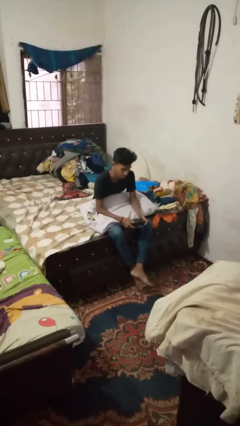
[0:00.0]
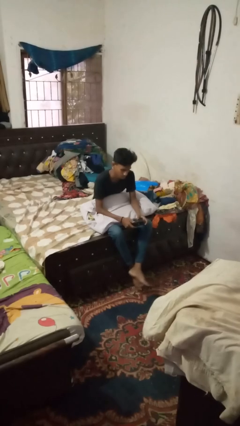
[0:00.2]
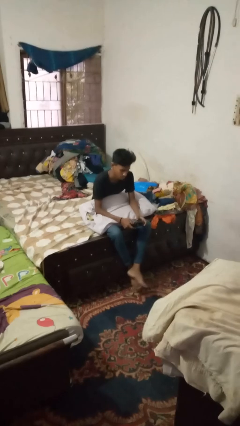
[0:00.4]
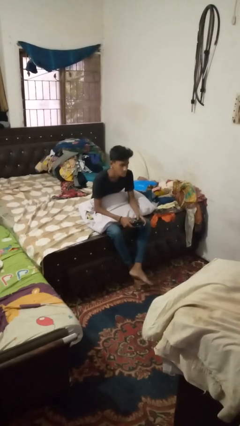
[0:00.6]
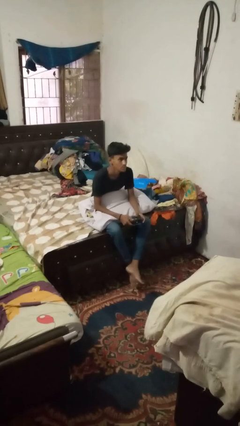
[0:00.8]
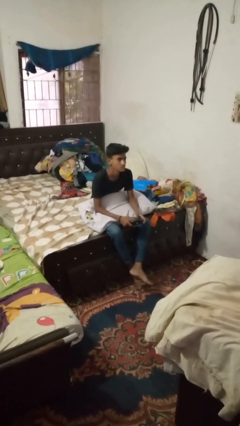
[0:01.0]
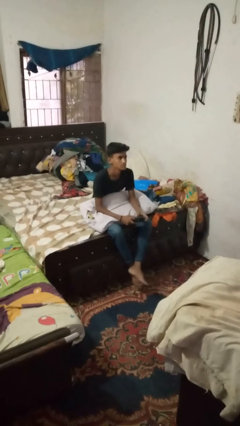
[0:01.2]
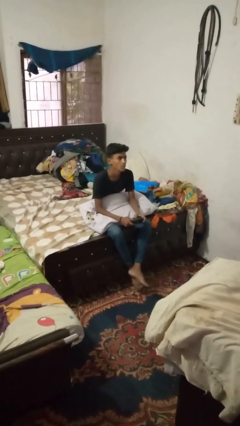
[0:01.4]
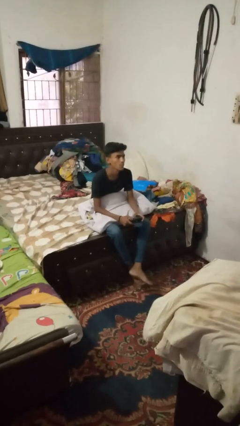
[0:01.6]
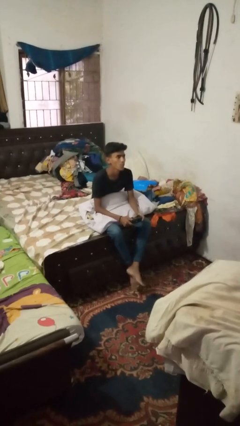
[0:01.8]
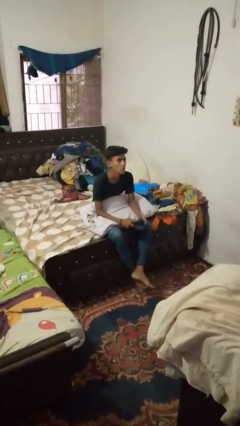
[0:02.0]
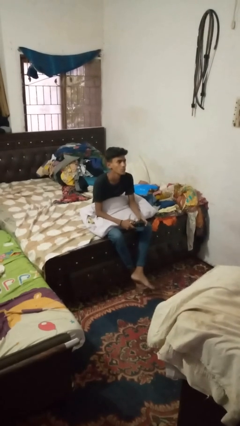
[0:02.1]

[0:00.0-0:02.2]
person interacts with handheld game

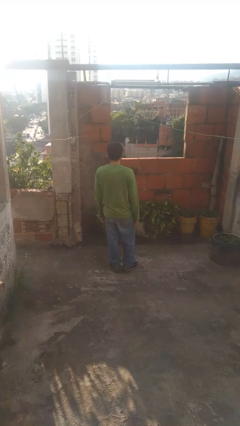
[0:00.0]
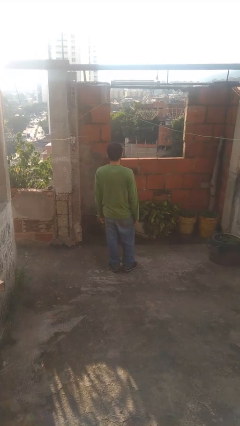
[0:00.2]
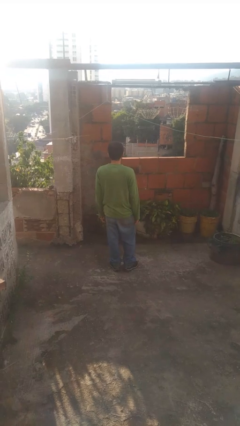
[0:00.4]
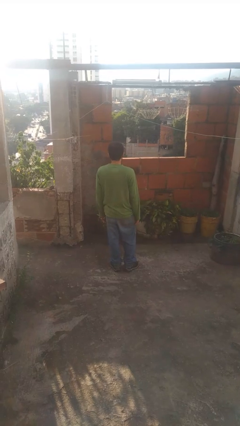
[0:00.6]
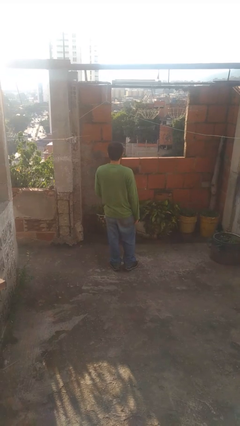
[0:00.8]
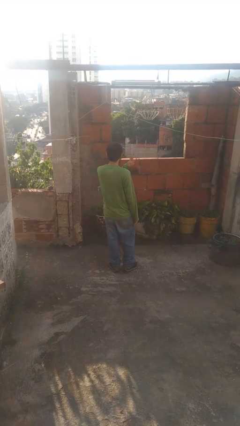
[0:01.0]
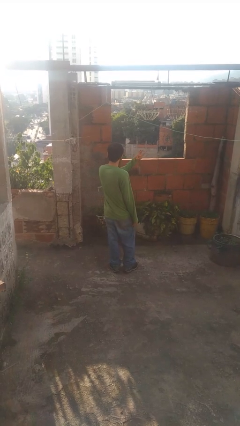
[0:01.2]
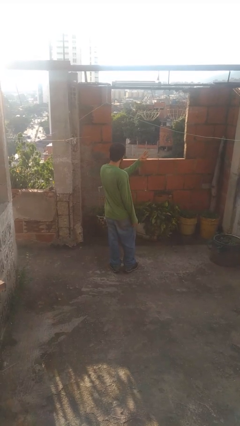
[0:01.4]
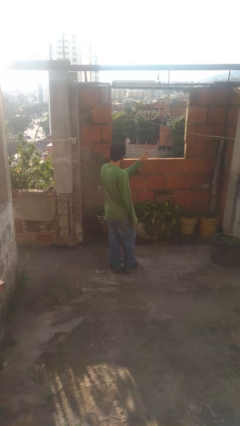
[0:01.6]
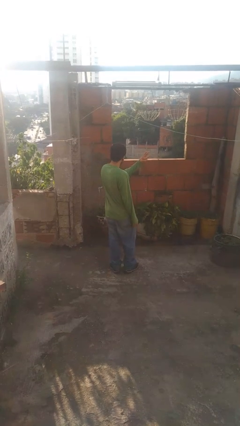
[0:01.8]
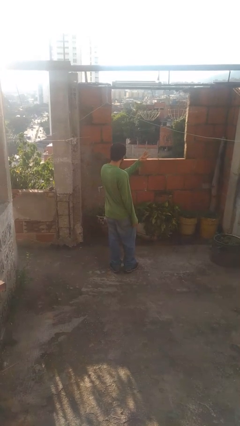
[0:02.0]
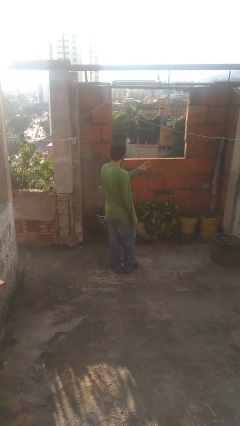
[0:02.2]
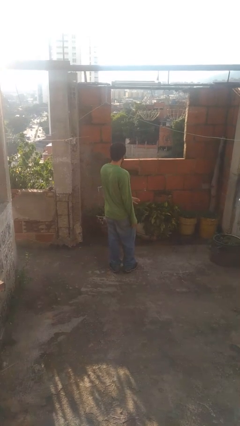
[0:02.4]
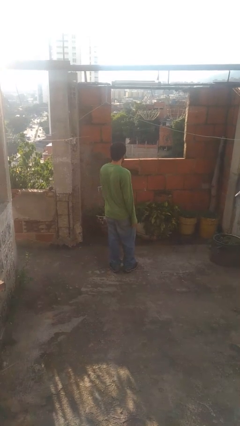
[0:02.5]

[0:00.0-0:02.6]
person gestures number three

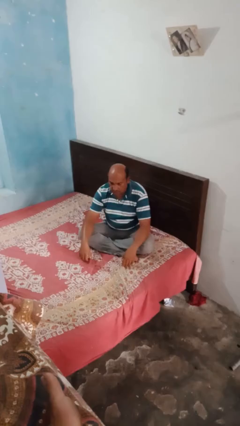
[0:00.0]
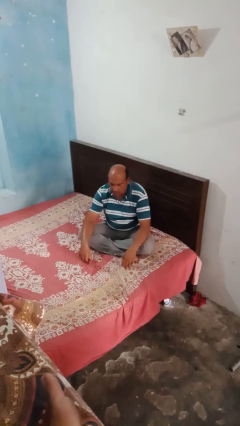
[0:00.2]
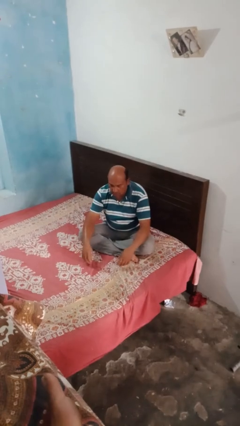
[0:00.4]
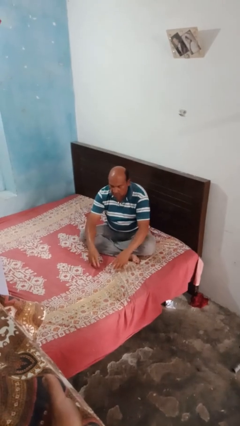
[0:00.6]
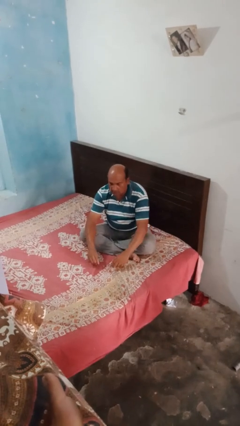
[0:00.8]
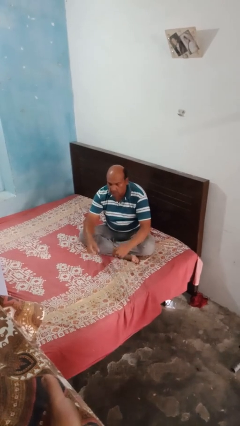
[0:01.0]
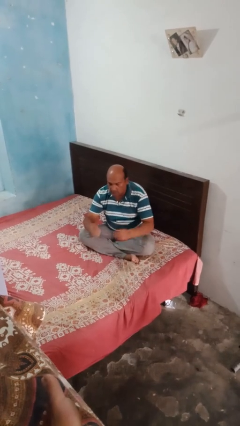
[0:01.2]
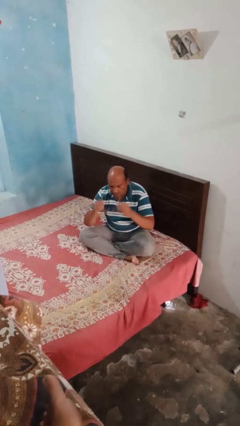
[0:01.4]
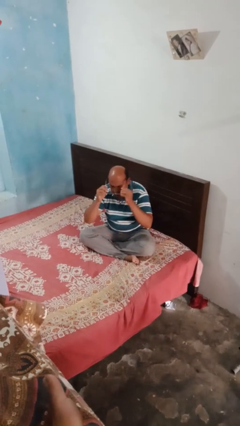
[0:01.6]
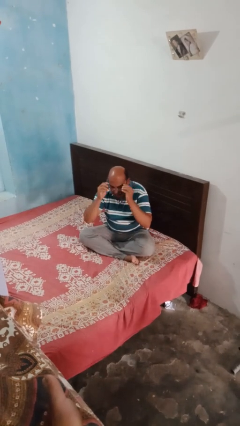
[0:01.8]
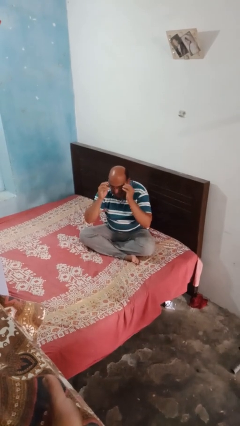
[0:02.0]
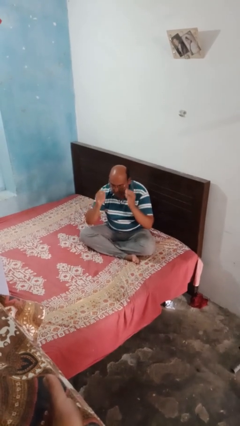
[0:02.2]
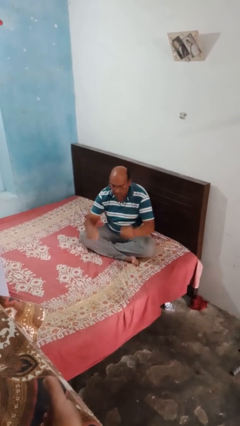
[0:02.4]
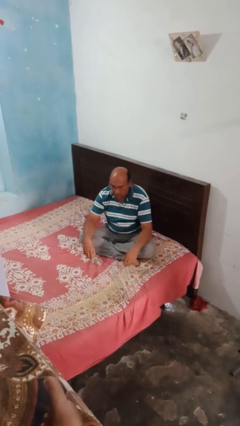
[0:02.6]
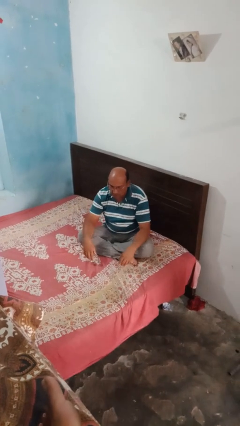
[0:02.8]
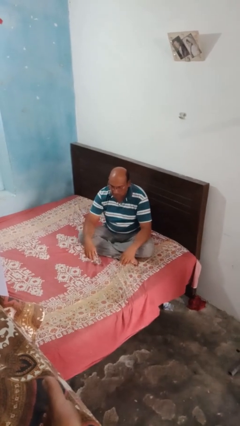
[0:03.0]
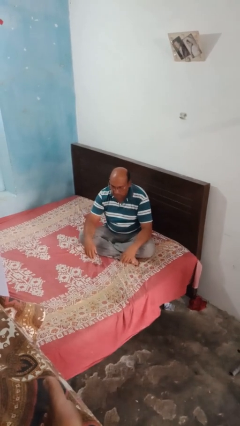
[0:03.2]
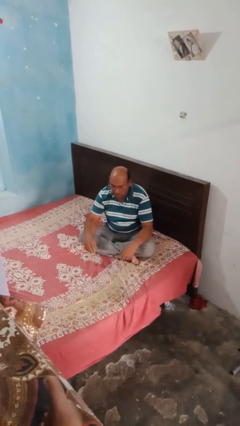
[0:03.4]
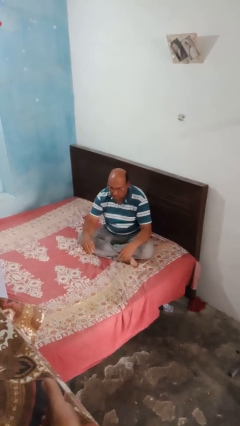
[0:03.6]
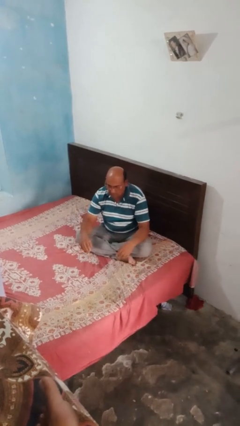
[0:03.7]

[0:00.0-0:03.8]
person puts on glasses

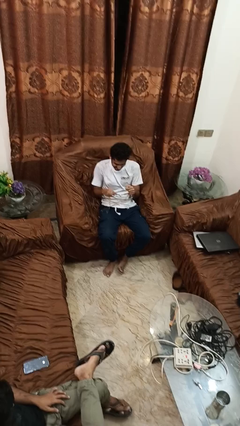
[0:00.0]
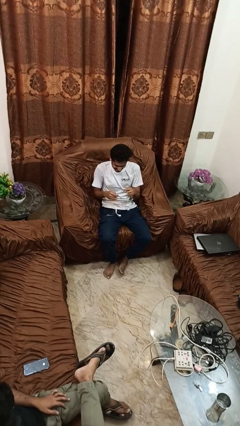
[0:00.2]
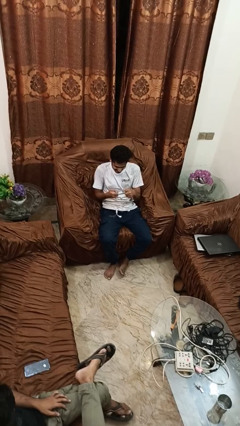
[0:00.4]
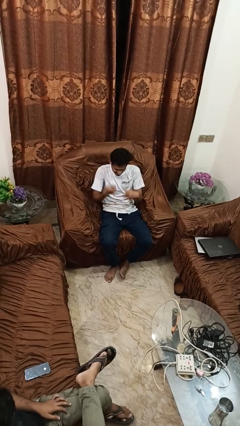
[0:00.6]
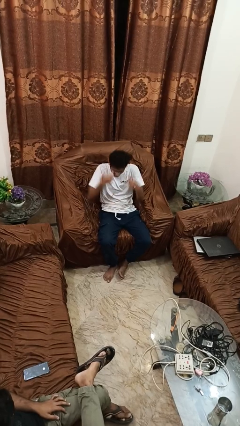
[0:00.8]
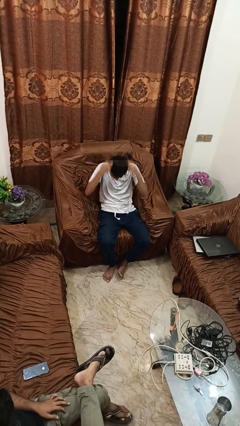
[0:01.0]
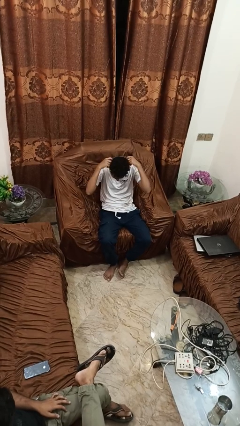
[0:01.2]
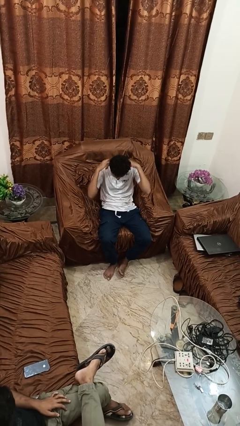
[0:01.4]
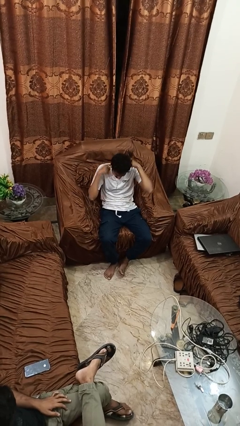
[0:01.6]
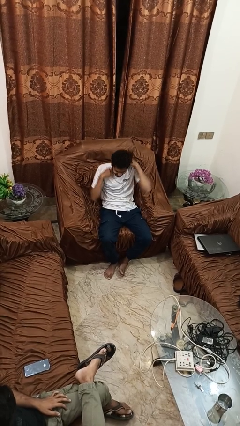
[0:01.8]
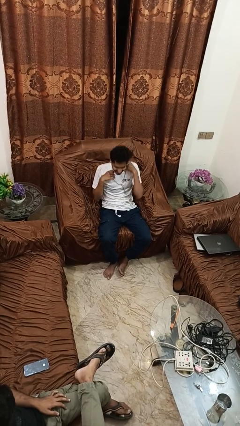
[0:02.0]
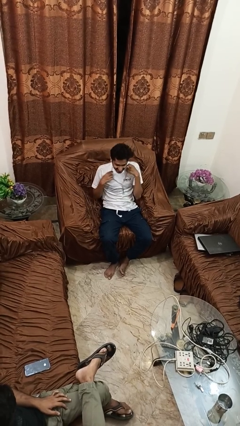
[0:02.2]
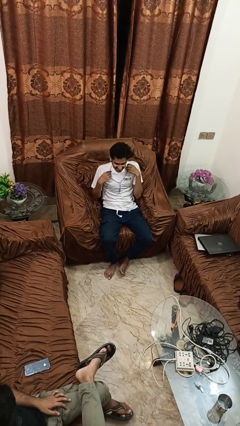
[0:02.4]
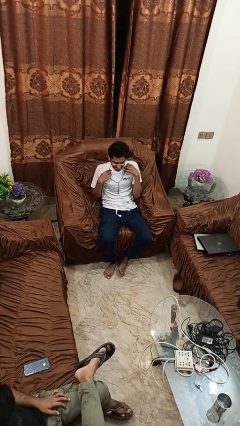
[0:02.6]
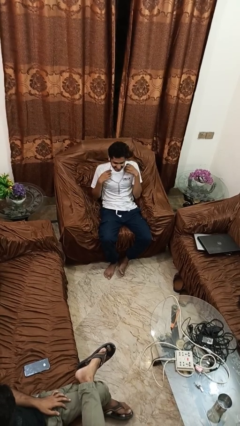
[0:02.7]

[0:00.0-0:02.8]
person puts on necklace

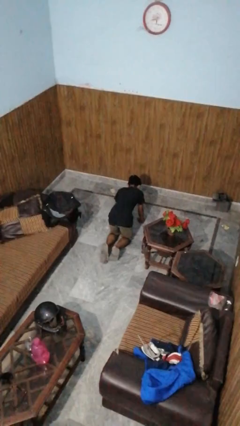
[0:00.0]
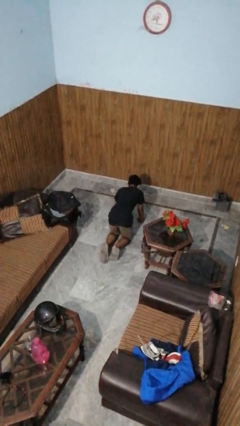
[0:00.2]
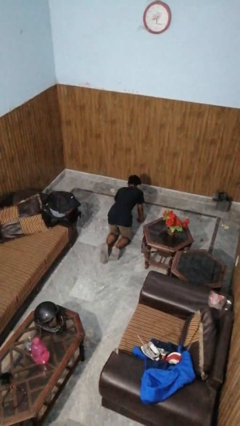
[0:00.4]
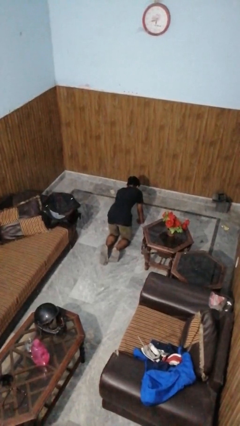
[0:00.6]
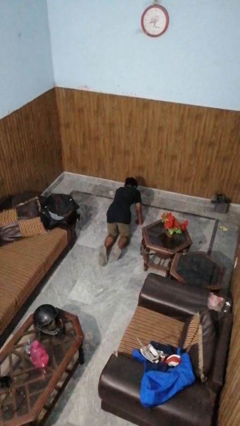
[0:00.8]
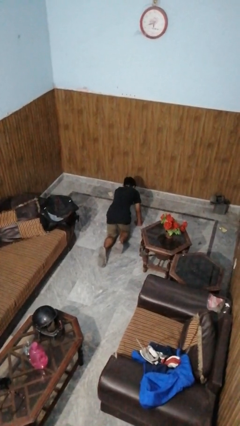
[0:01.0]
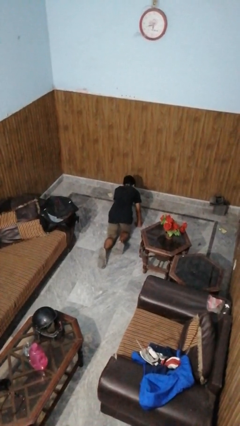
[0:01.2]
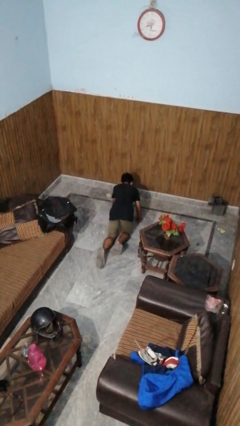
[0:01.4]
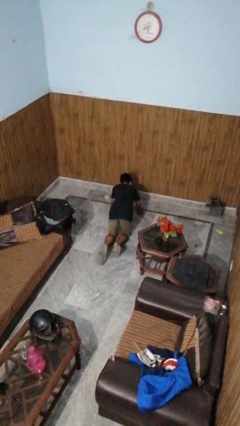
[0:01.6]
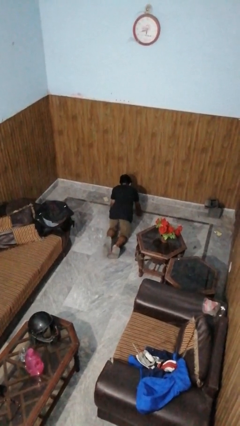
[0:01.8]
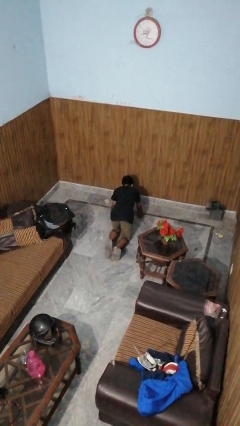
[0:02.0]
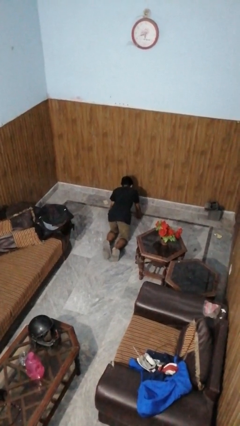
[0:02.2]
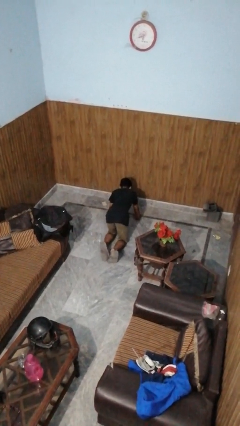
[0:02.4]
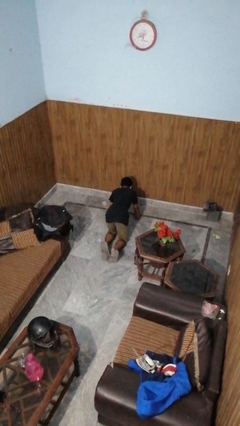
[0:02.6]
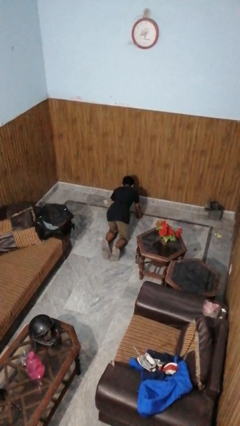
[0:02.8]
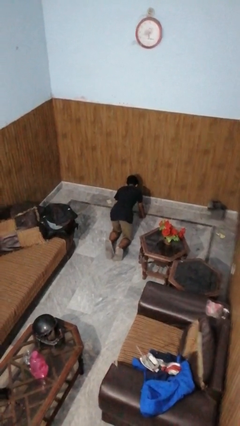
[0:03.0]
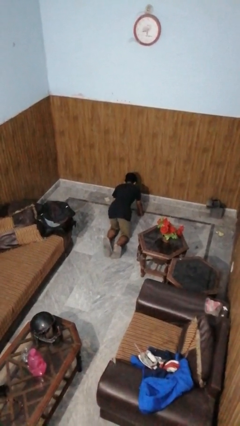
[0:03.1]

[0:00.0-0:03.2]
person crawls

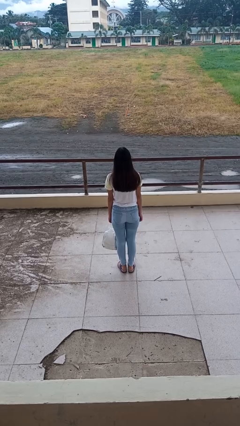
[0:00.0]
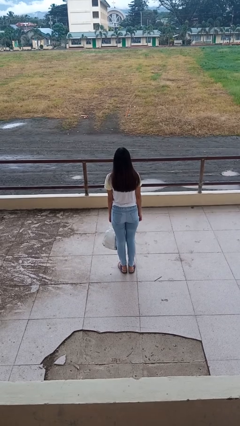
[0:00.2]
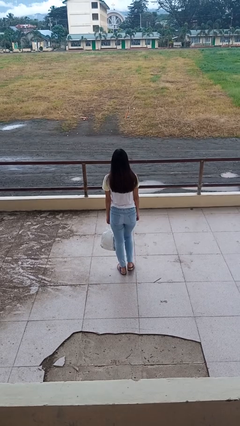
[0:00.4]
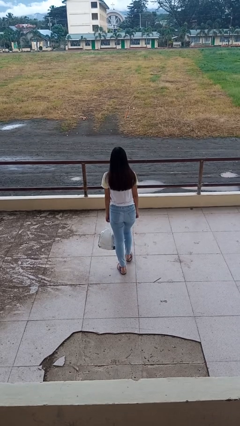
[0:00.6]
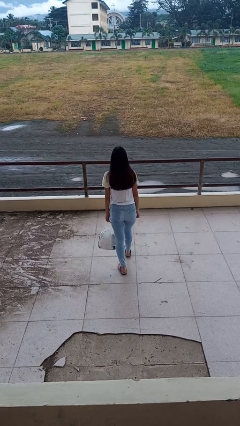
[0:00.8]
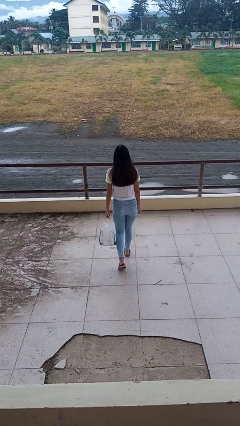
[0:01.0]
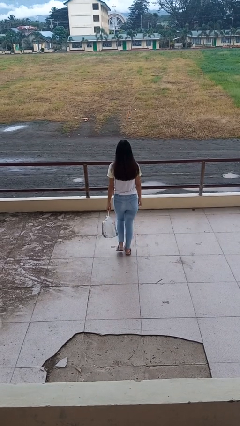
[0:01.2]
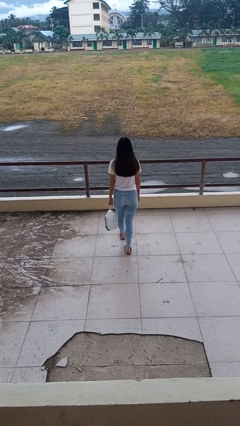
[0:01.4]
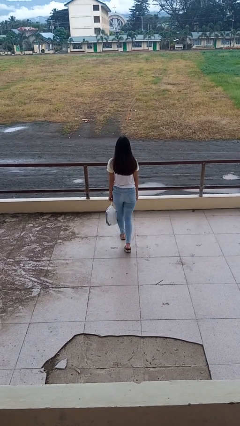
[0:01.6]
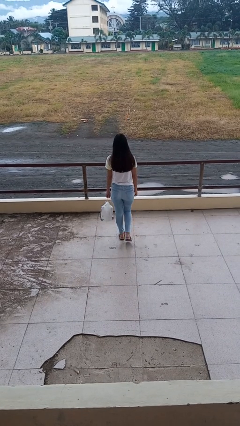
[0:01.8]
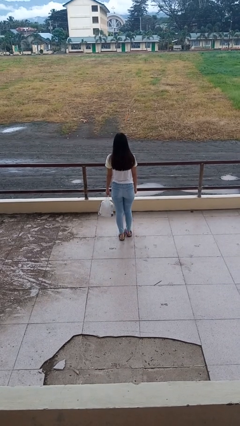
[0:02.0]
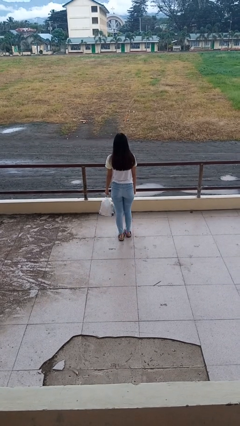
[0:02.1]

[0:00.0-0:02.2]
person carries groceries

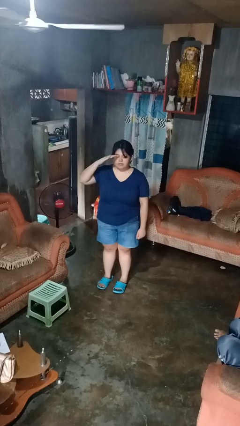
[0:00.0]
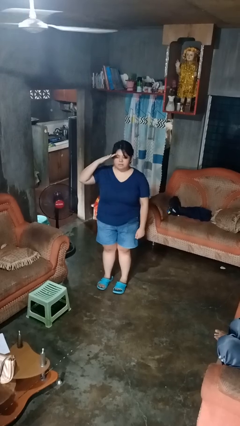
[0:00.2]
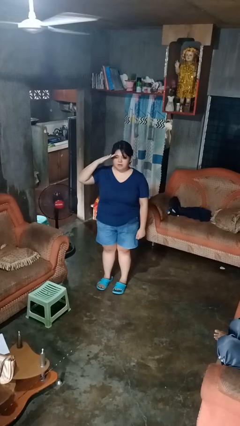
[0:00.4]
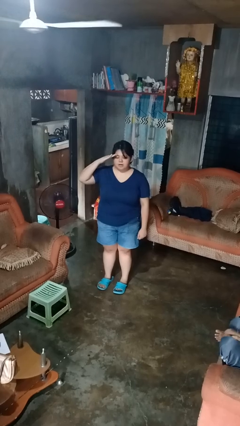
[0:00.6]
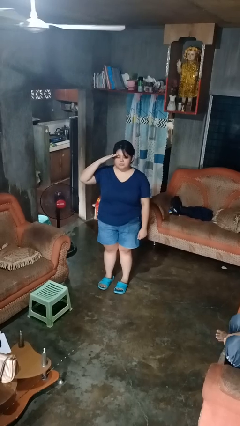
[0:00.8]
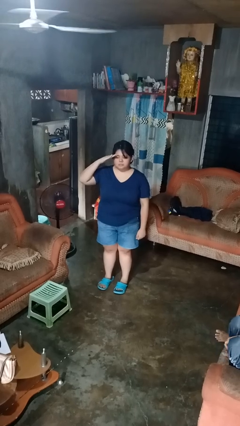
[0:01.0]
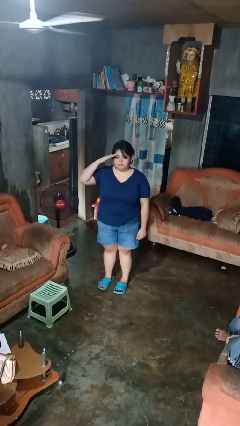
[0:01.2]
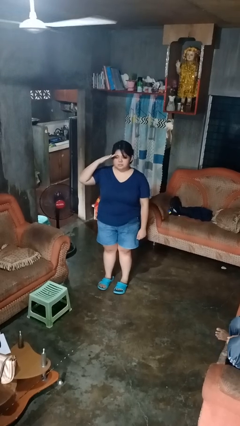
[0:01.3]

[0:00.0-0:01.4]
person salutes
